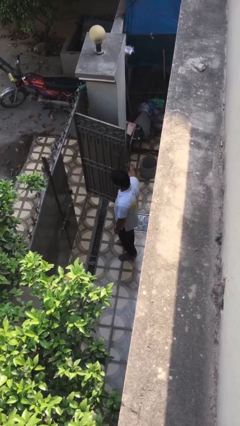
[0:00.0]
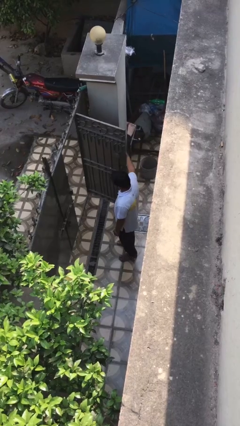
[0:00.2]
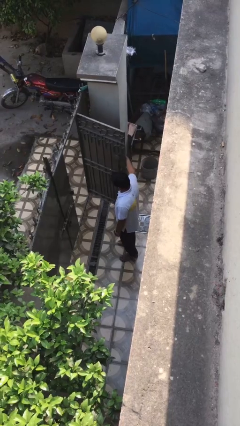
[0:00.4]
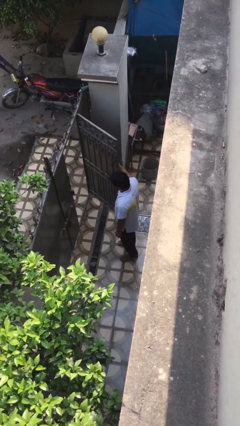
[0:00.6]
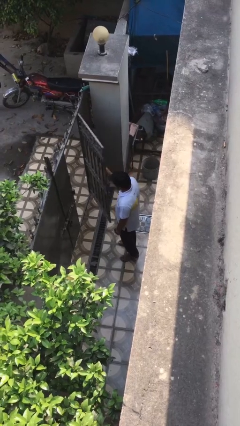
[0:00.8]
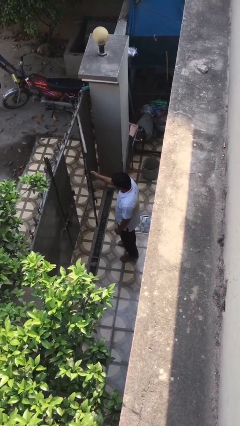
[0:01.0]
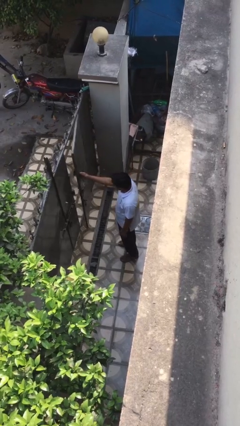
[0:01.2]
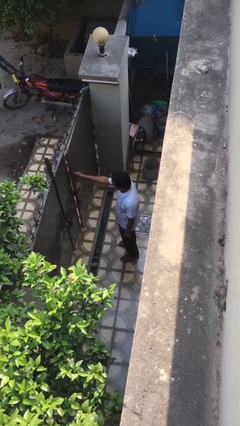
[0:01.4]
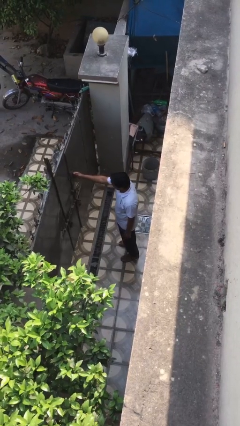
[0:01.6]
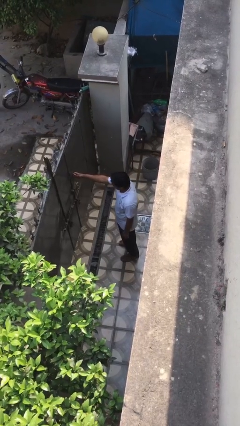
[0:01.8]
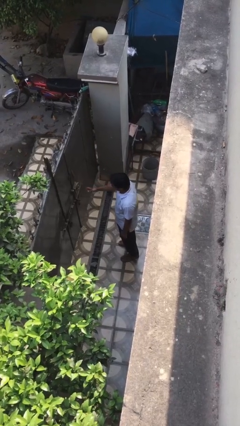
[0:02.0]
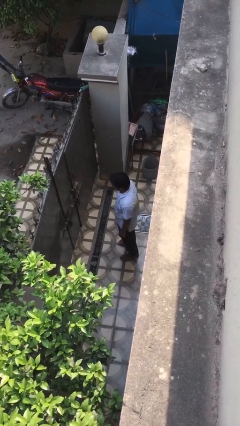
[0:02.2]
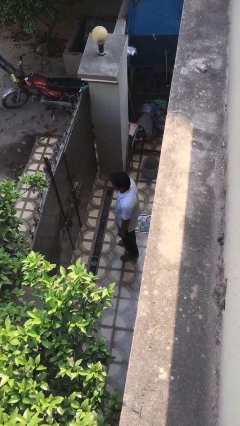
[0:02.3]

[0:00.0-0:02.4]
person closes facility door

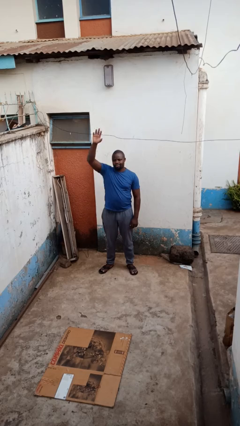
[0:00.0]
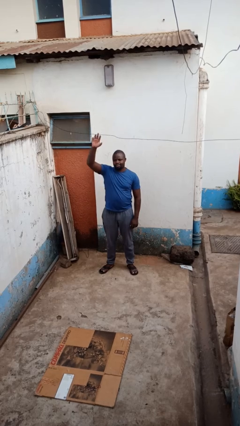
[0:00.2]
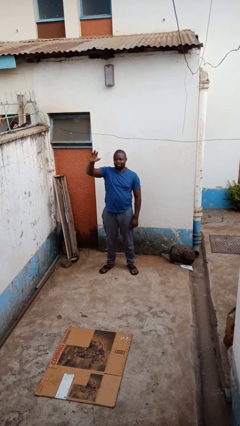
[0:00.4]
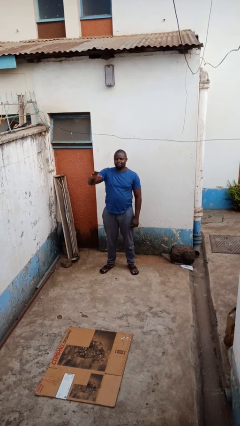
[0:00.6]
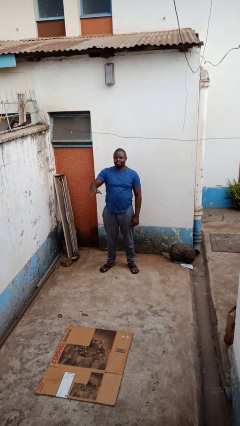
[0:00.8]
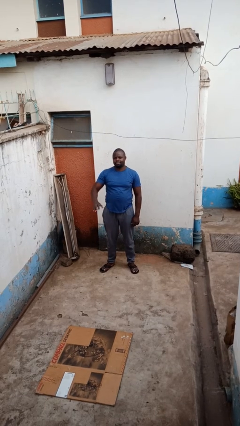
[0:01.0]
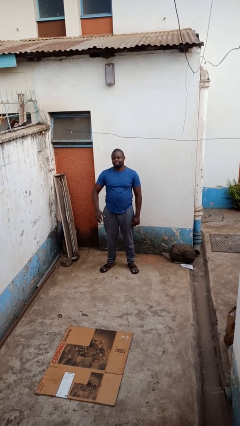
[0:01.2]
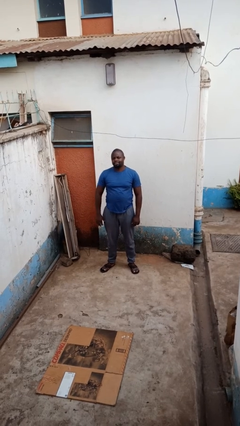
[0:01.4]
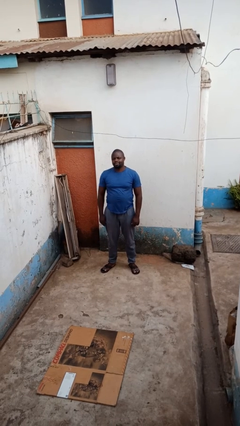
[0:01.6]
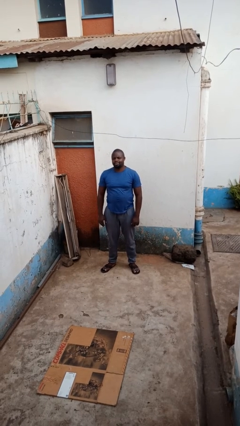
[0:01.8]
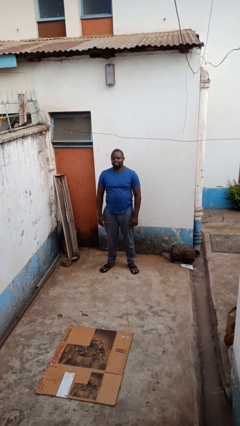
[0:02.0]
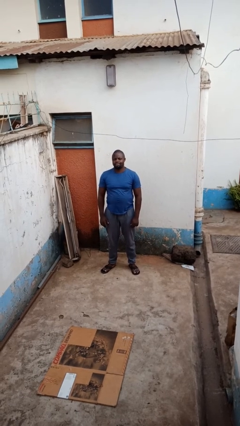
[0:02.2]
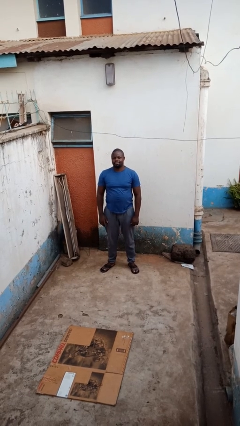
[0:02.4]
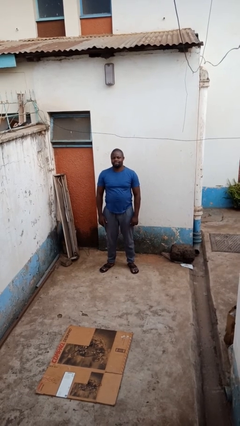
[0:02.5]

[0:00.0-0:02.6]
person gestures lower hand

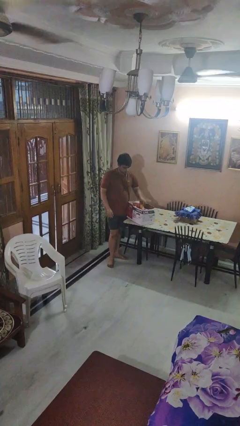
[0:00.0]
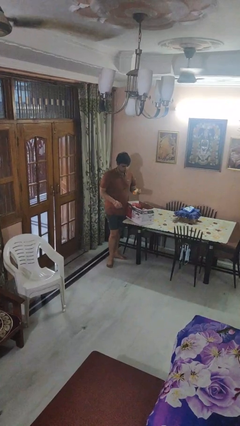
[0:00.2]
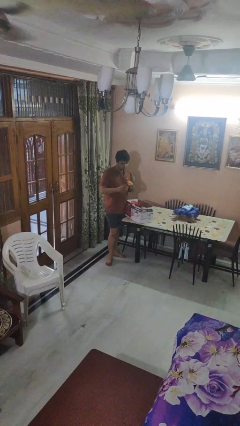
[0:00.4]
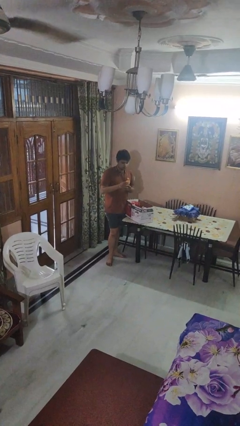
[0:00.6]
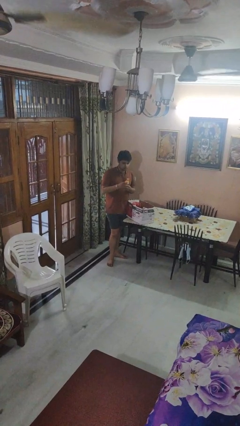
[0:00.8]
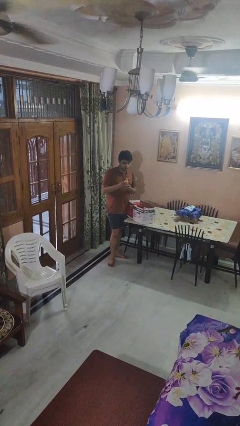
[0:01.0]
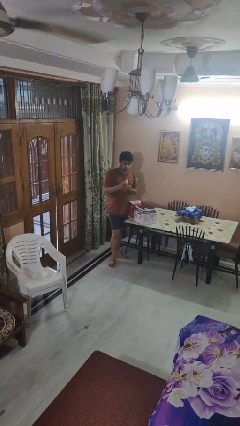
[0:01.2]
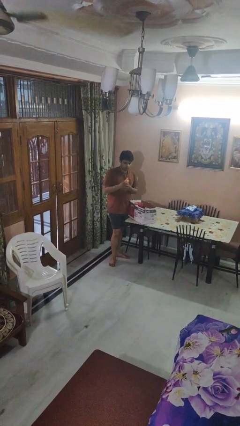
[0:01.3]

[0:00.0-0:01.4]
person takes object from box

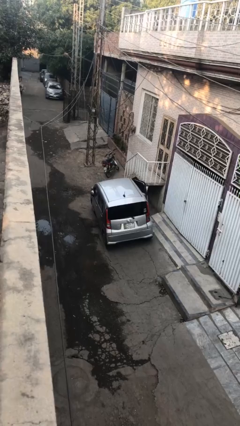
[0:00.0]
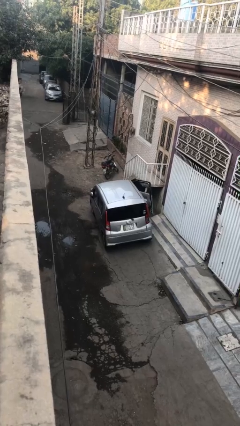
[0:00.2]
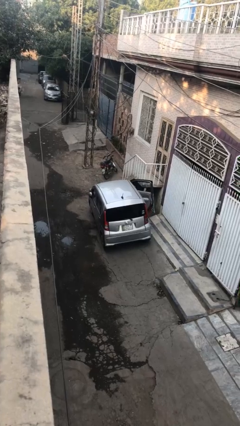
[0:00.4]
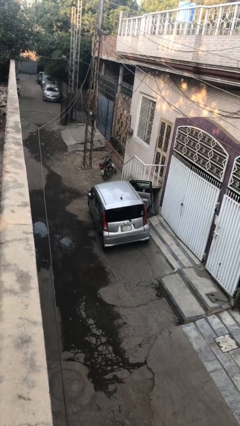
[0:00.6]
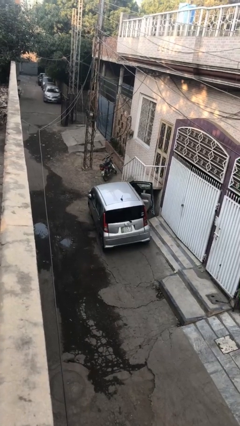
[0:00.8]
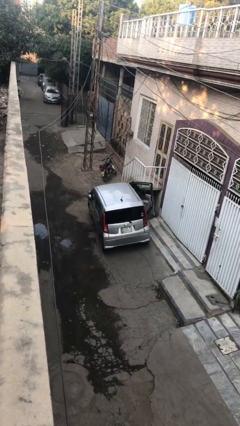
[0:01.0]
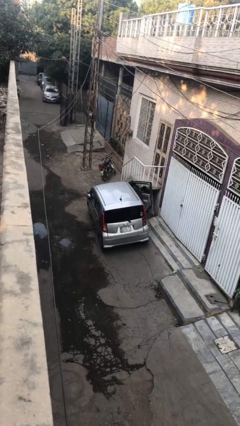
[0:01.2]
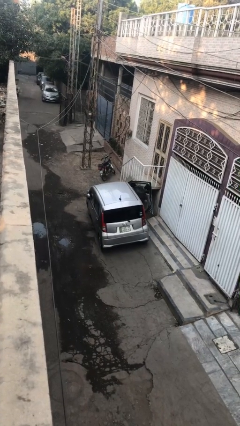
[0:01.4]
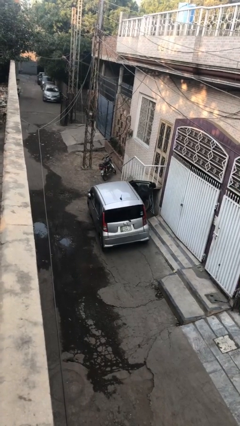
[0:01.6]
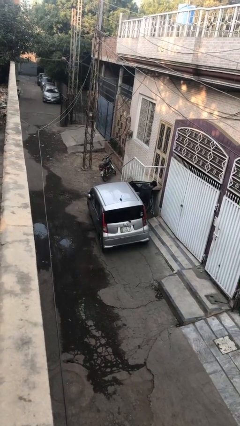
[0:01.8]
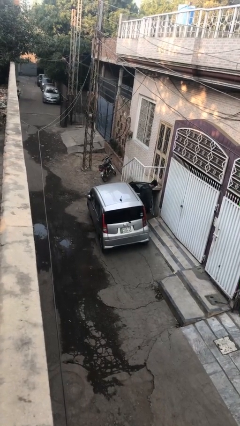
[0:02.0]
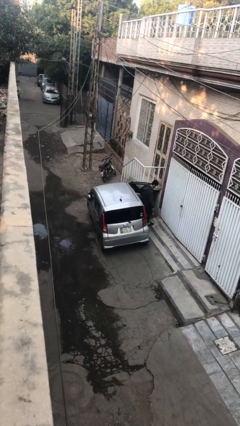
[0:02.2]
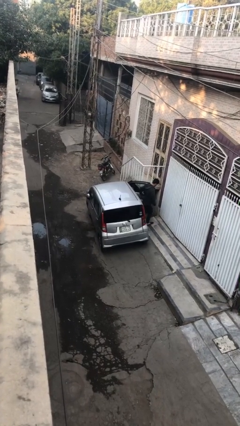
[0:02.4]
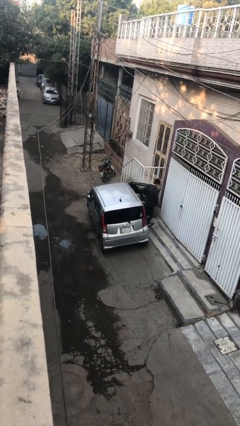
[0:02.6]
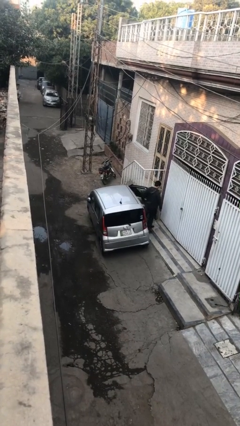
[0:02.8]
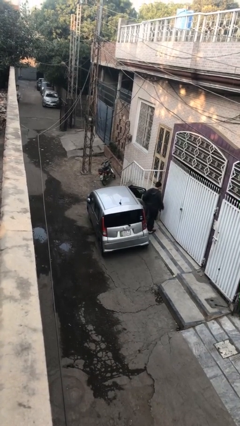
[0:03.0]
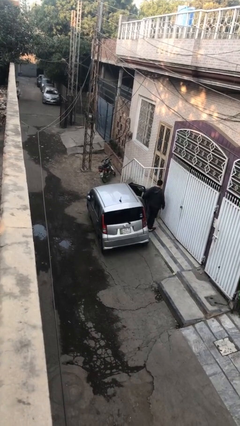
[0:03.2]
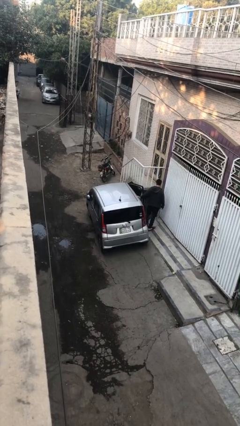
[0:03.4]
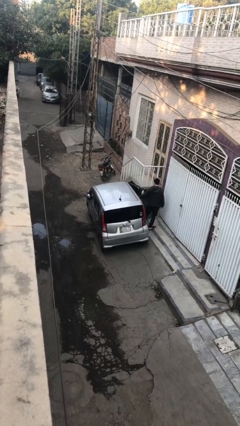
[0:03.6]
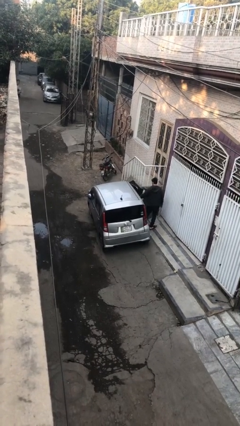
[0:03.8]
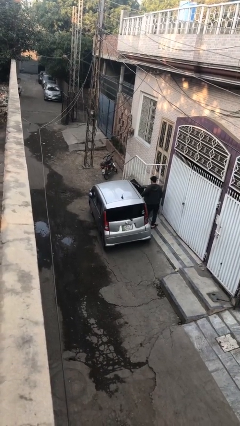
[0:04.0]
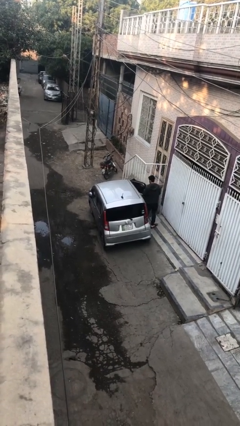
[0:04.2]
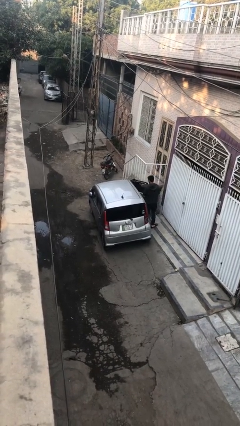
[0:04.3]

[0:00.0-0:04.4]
car drops off person

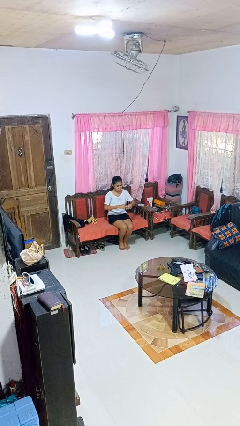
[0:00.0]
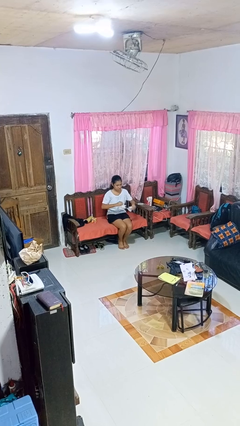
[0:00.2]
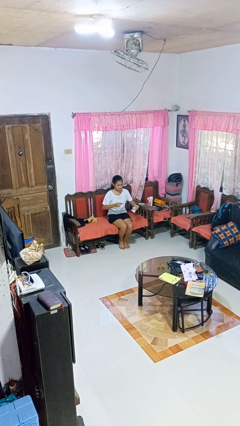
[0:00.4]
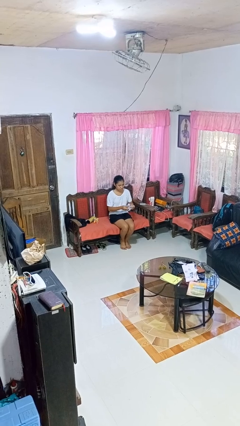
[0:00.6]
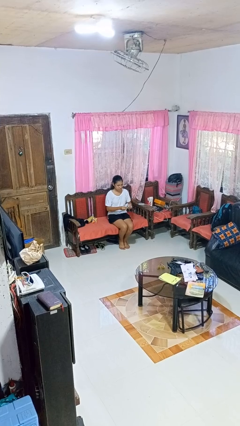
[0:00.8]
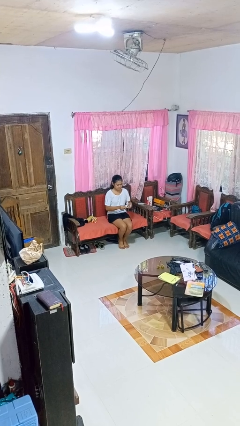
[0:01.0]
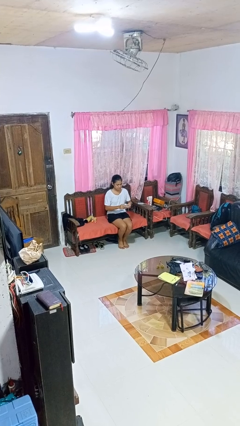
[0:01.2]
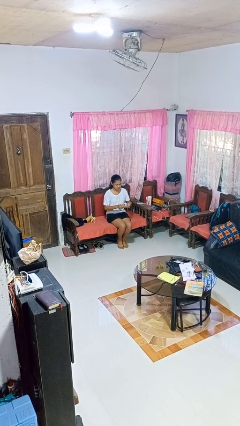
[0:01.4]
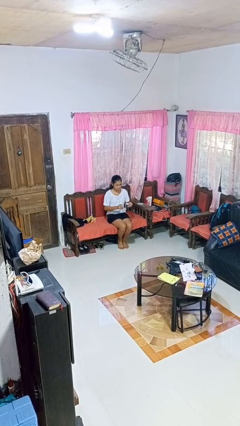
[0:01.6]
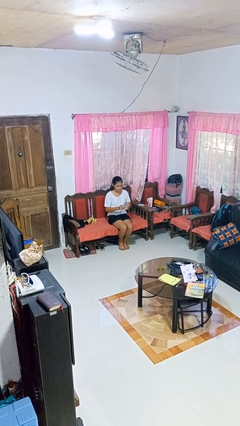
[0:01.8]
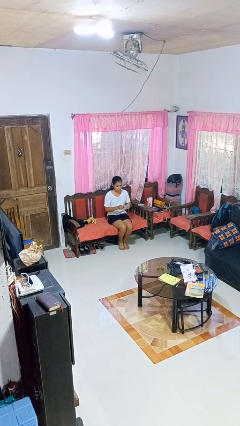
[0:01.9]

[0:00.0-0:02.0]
person tears paper

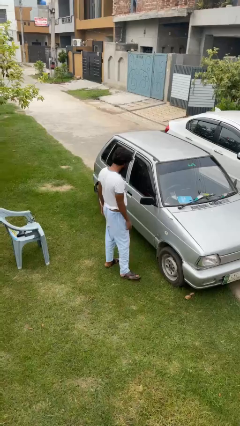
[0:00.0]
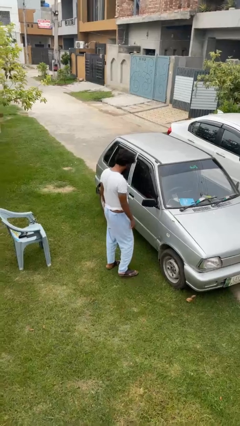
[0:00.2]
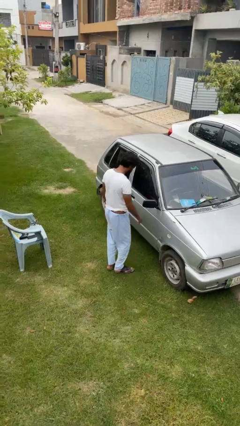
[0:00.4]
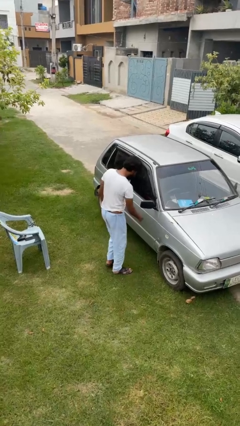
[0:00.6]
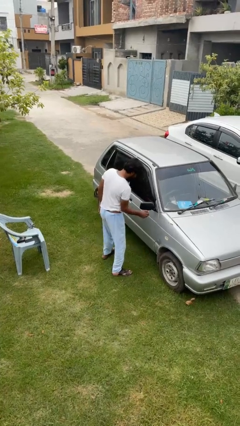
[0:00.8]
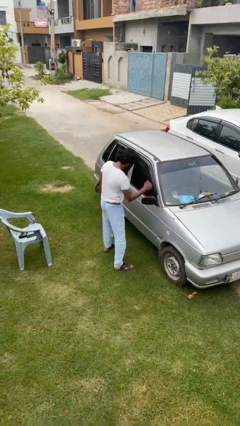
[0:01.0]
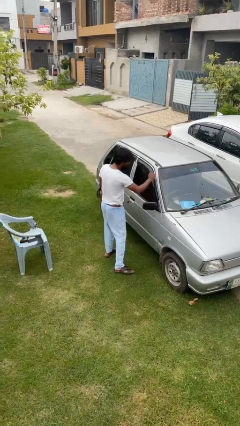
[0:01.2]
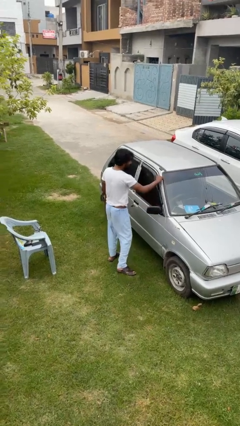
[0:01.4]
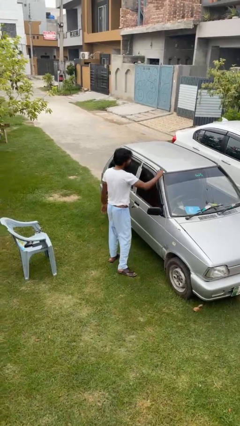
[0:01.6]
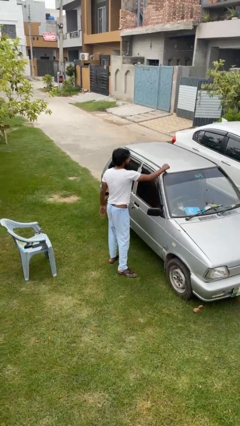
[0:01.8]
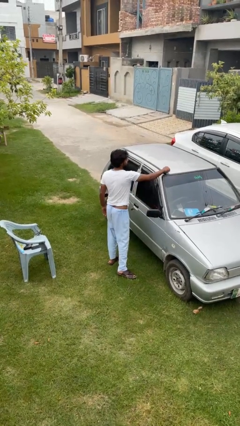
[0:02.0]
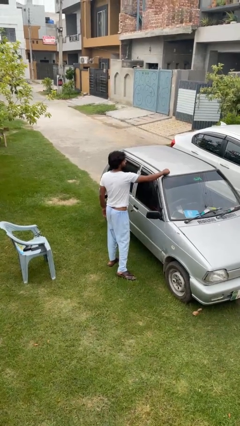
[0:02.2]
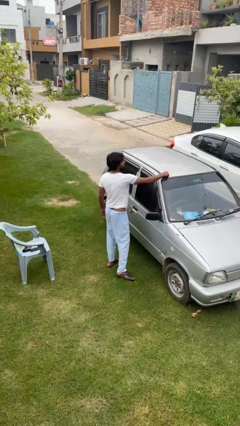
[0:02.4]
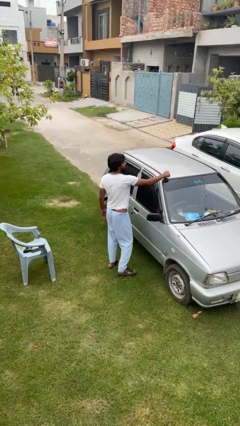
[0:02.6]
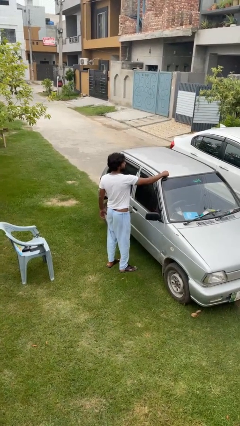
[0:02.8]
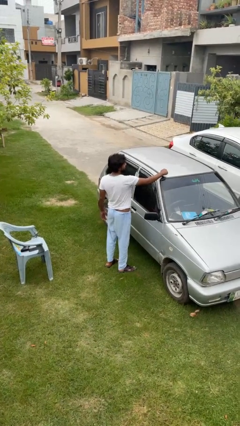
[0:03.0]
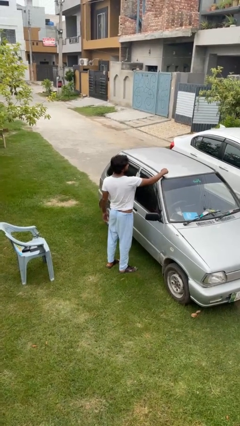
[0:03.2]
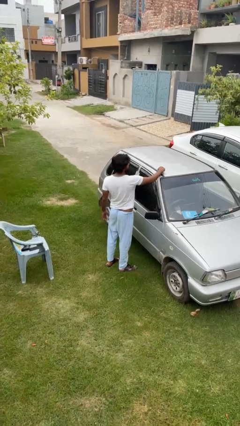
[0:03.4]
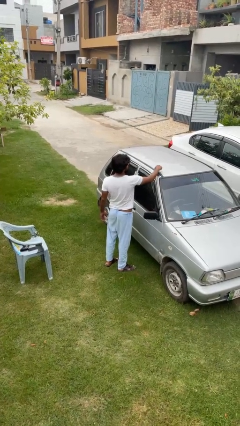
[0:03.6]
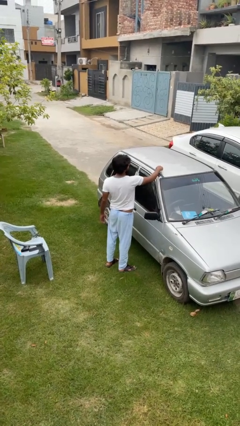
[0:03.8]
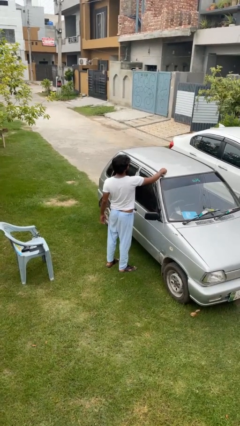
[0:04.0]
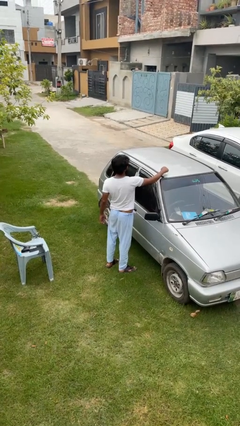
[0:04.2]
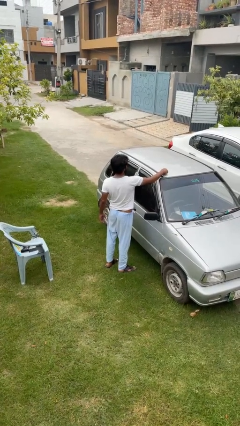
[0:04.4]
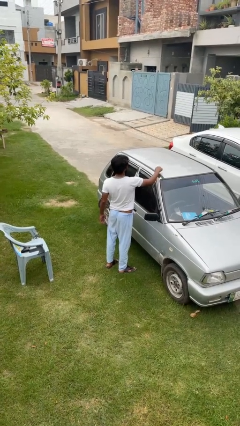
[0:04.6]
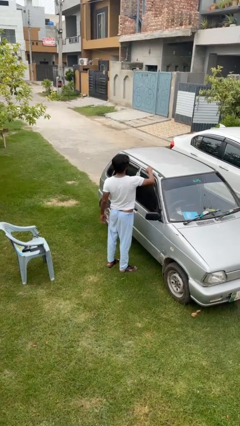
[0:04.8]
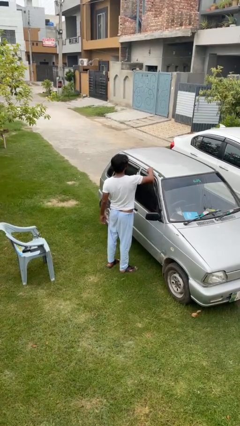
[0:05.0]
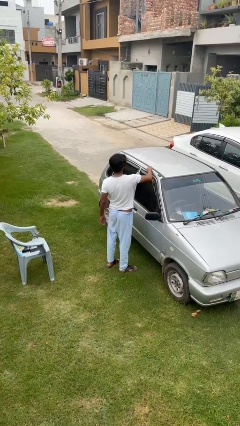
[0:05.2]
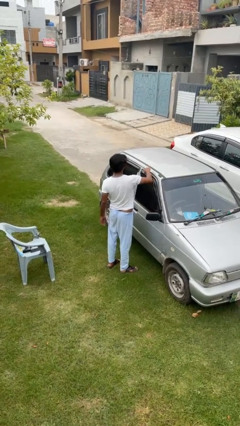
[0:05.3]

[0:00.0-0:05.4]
person taps object with finger
